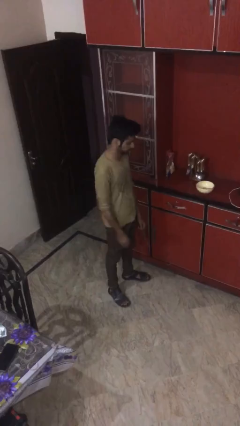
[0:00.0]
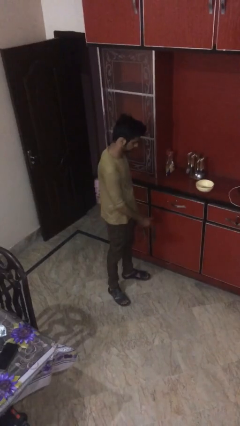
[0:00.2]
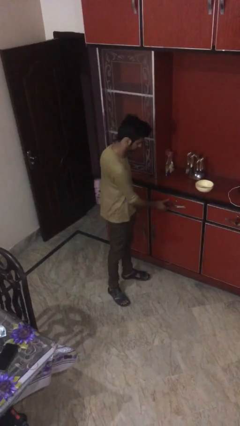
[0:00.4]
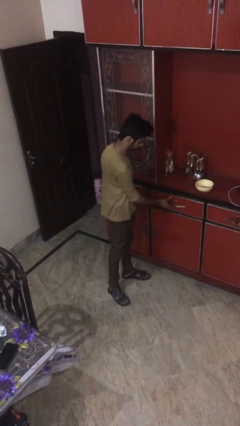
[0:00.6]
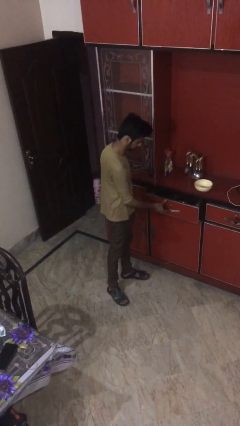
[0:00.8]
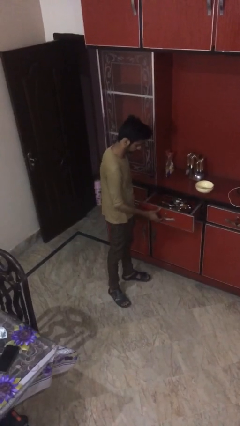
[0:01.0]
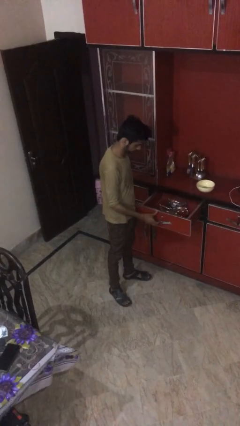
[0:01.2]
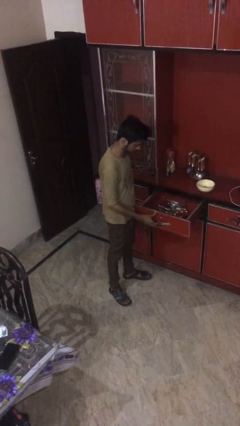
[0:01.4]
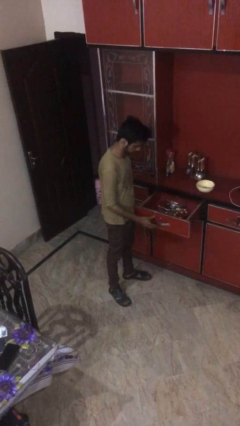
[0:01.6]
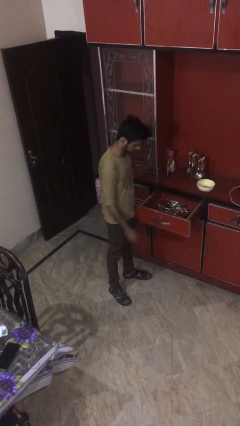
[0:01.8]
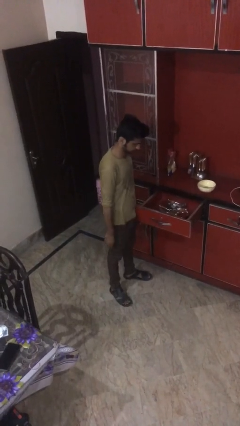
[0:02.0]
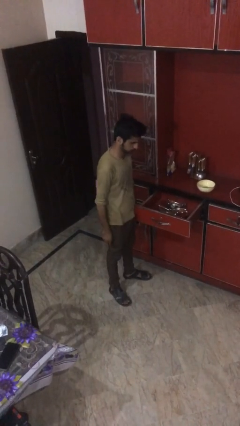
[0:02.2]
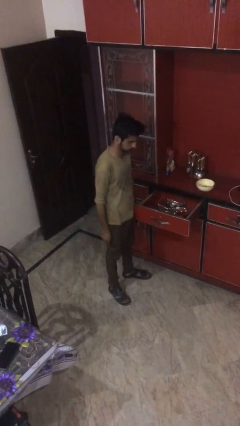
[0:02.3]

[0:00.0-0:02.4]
person opens kitchen drawer

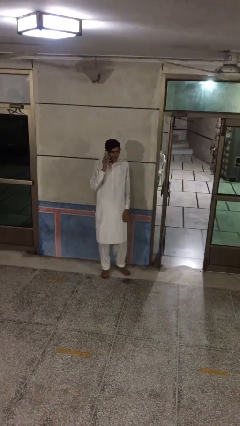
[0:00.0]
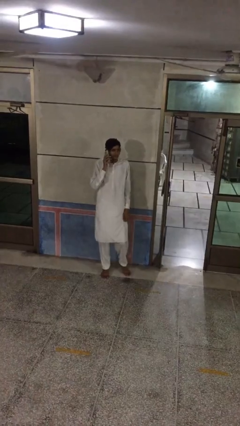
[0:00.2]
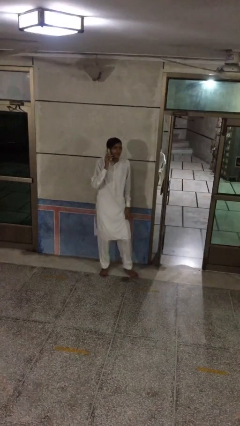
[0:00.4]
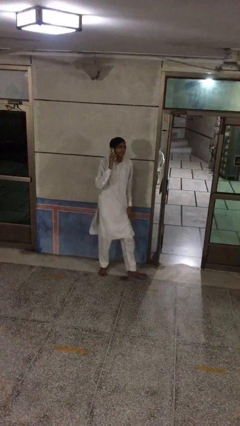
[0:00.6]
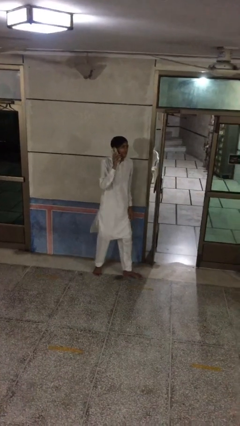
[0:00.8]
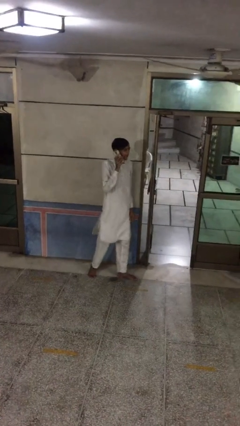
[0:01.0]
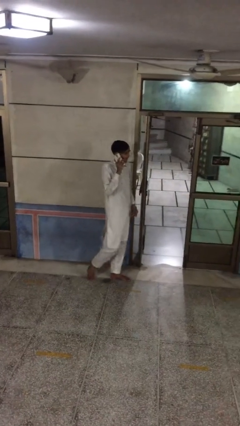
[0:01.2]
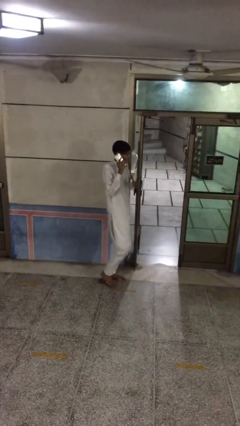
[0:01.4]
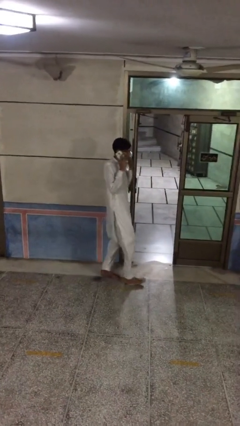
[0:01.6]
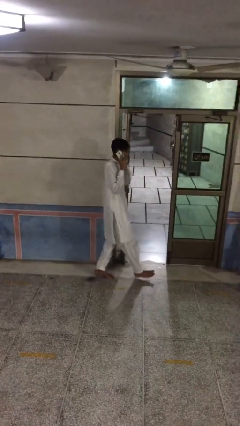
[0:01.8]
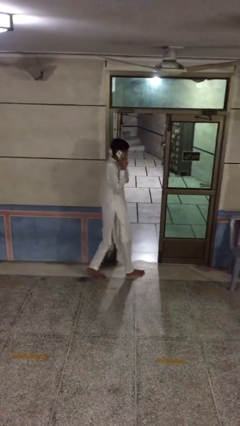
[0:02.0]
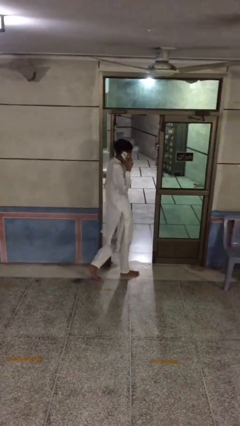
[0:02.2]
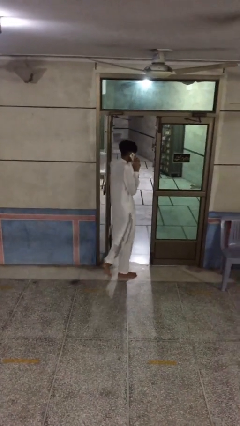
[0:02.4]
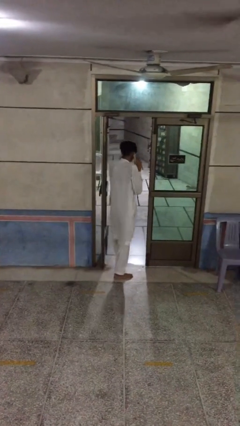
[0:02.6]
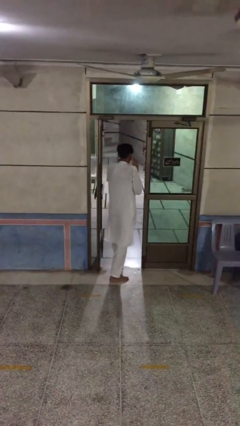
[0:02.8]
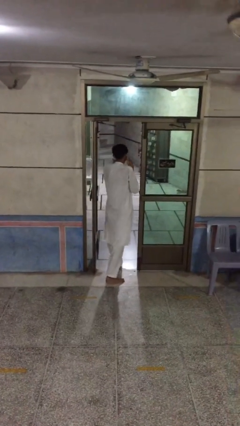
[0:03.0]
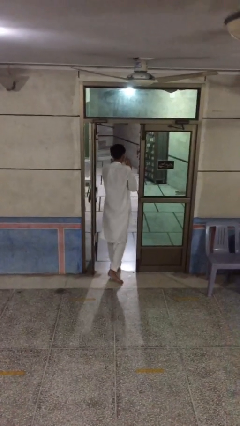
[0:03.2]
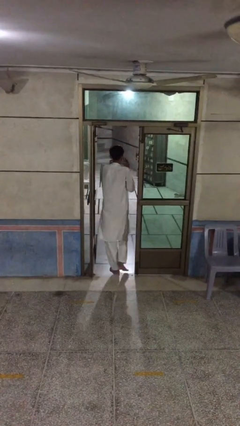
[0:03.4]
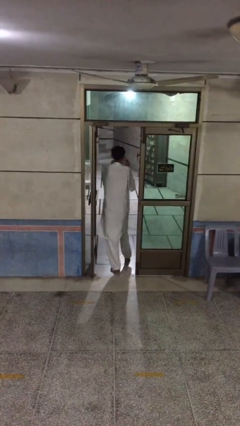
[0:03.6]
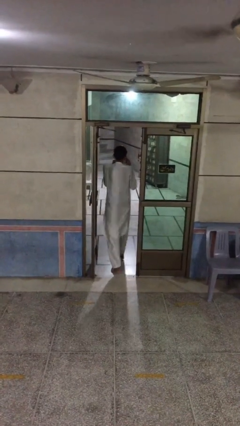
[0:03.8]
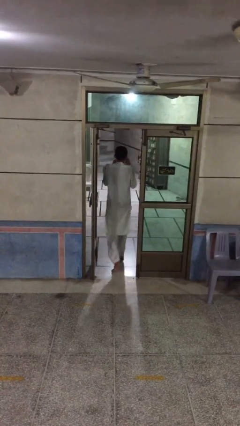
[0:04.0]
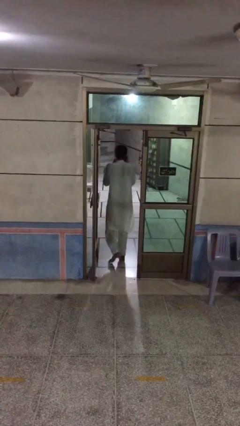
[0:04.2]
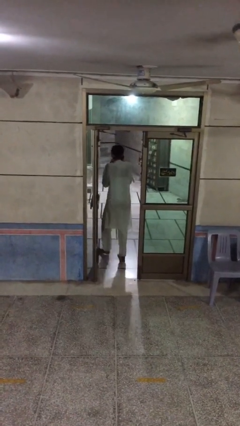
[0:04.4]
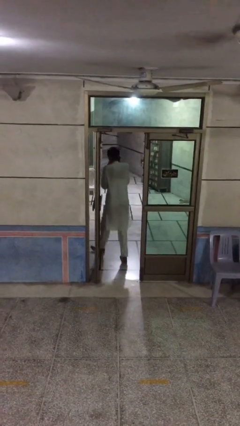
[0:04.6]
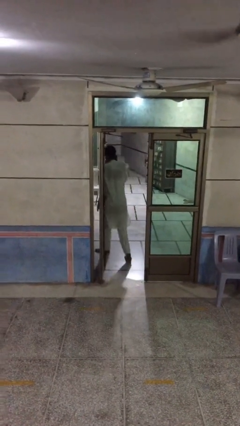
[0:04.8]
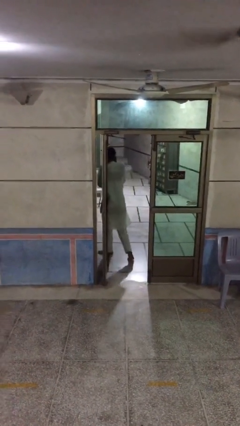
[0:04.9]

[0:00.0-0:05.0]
person exits scene through structure

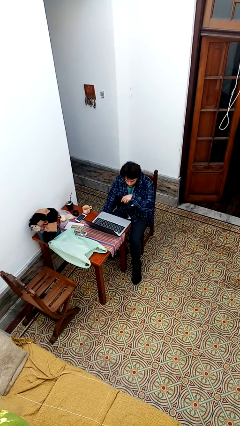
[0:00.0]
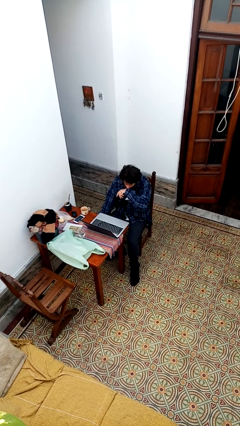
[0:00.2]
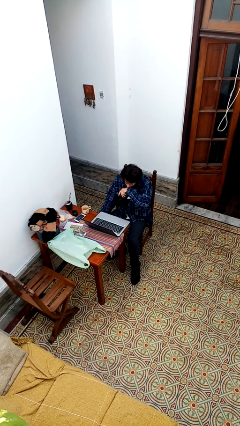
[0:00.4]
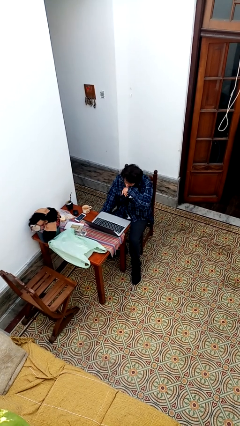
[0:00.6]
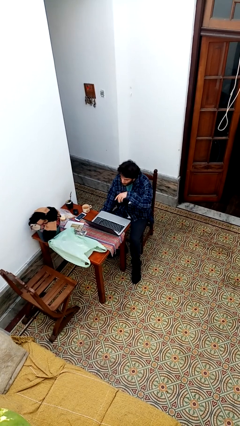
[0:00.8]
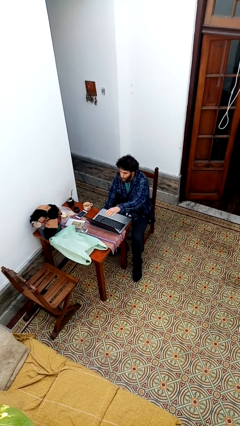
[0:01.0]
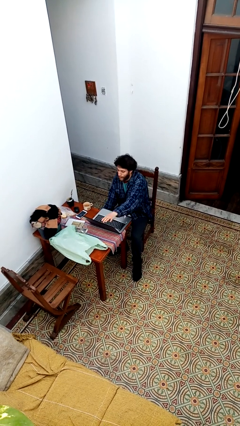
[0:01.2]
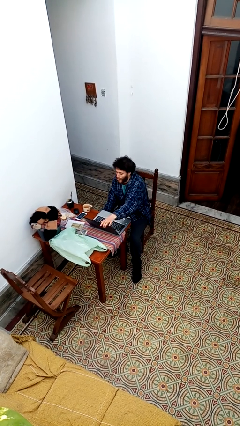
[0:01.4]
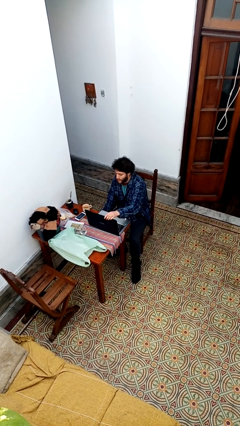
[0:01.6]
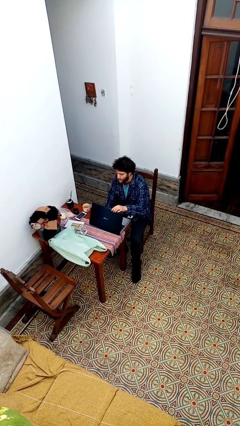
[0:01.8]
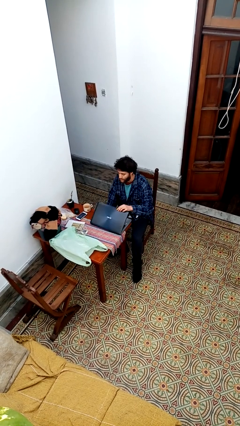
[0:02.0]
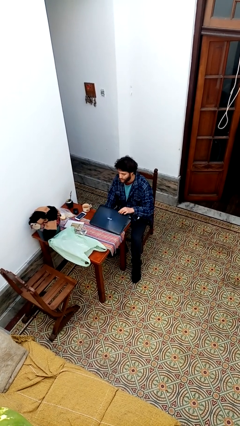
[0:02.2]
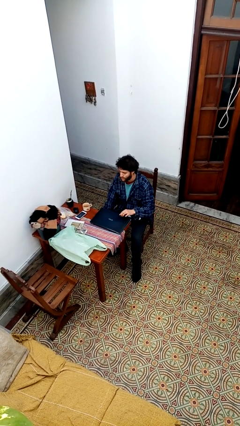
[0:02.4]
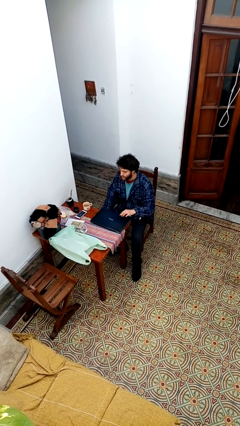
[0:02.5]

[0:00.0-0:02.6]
person closes laptop

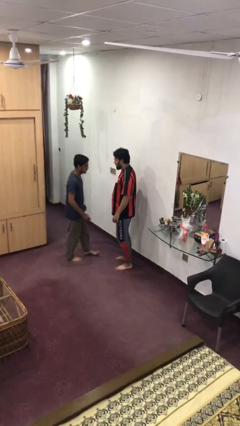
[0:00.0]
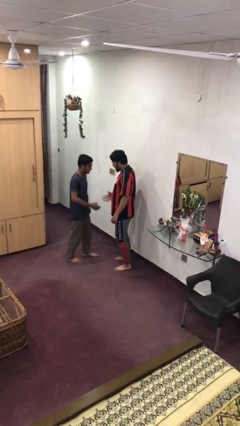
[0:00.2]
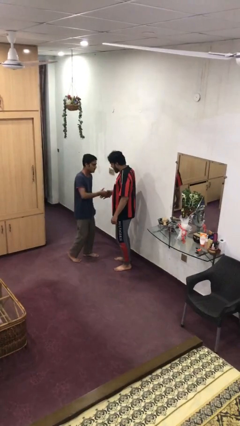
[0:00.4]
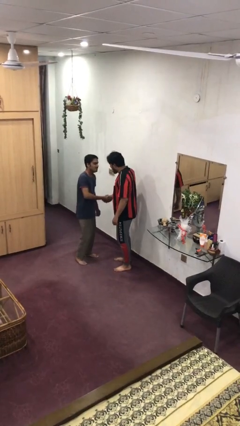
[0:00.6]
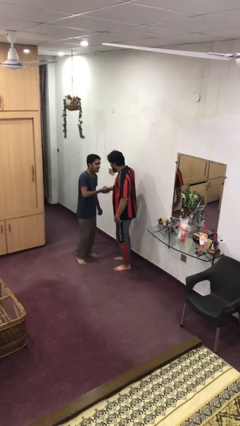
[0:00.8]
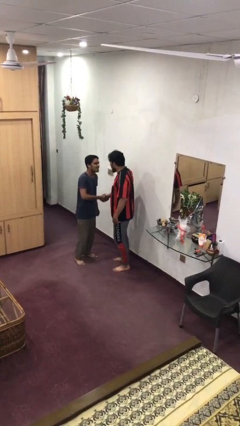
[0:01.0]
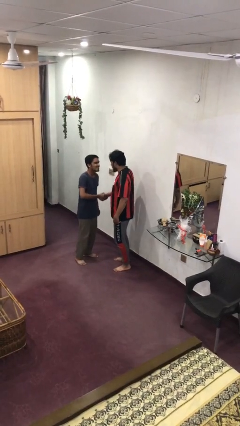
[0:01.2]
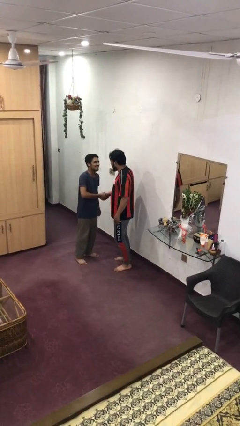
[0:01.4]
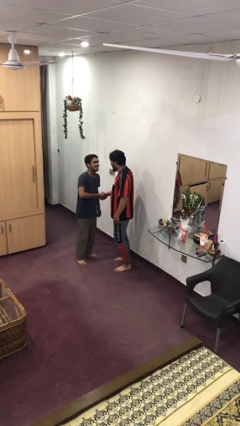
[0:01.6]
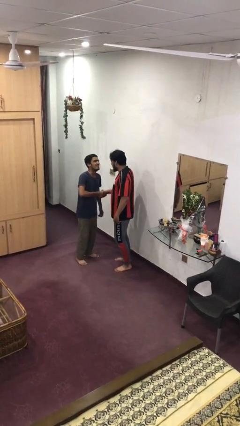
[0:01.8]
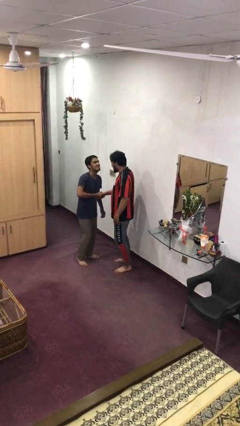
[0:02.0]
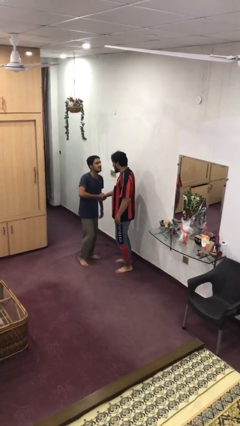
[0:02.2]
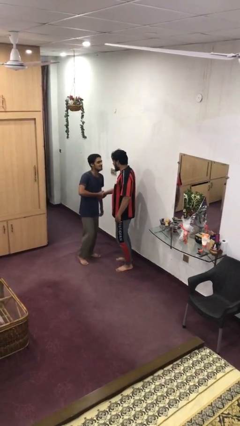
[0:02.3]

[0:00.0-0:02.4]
person shakes hand

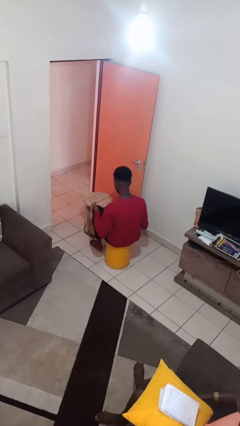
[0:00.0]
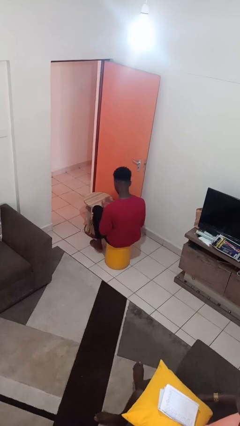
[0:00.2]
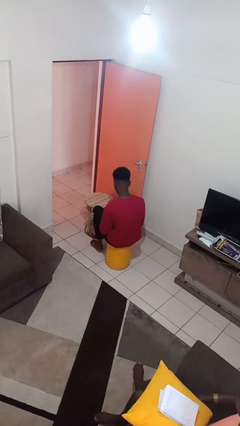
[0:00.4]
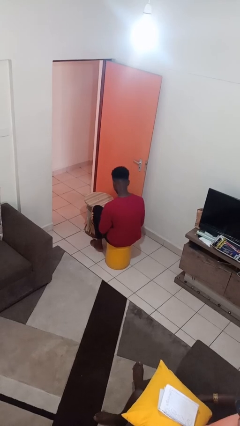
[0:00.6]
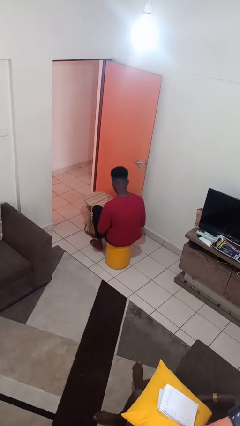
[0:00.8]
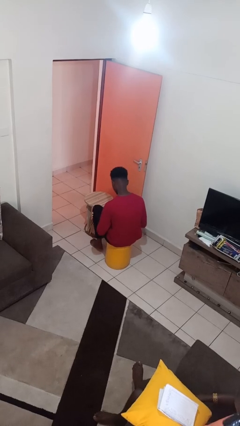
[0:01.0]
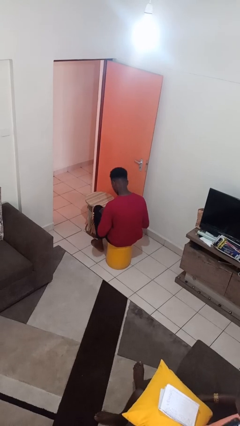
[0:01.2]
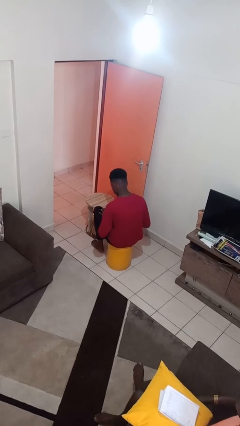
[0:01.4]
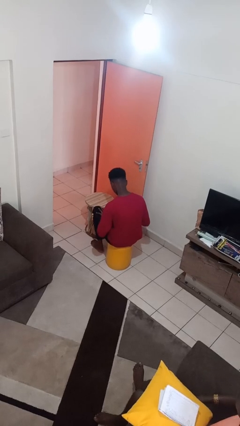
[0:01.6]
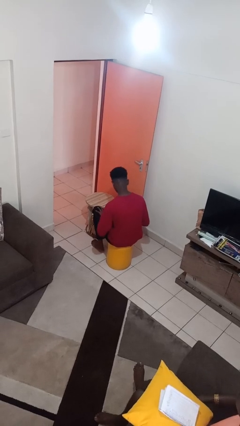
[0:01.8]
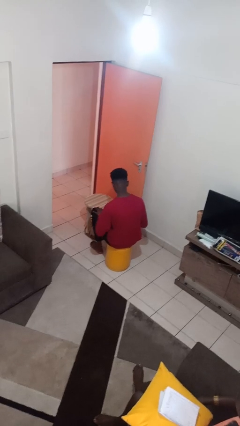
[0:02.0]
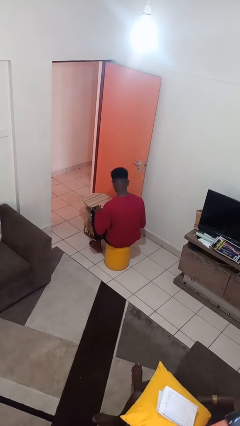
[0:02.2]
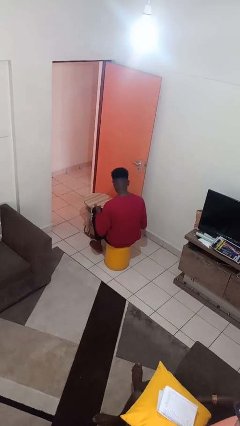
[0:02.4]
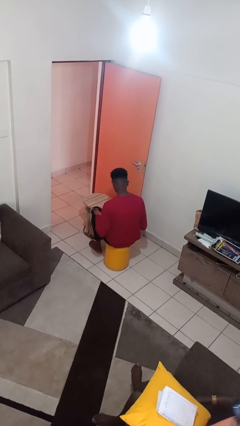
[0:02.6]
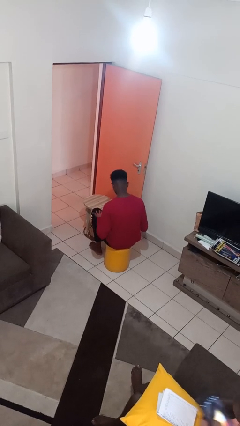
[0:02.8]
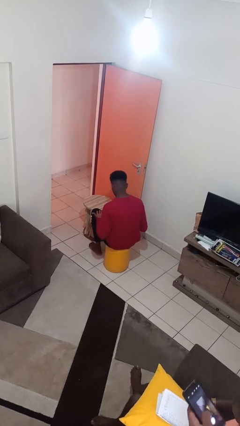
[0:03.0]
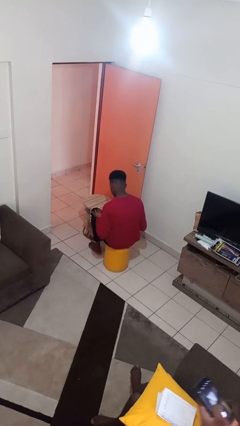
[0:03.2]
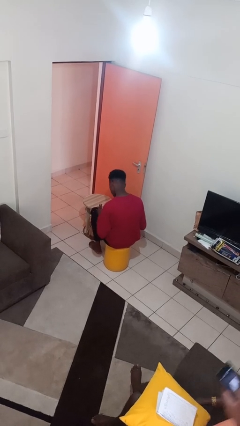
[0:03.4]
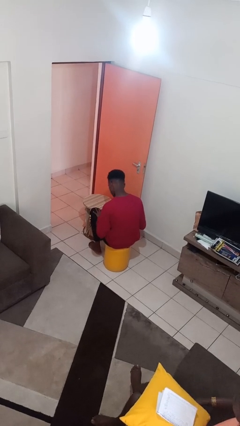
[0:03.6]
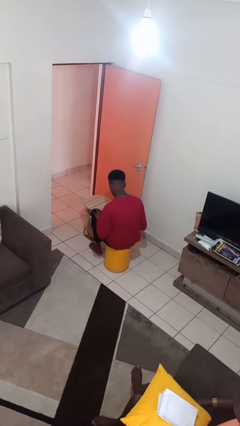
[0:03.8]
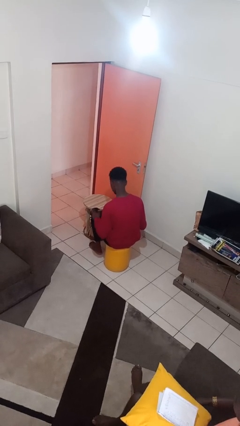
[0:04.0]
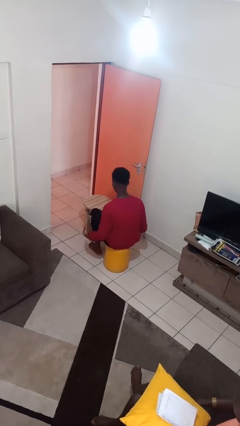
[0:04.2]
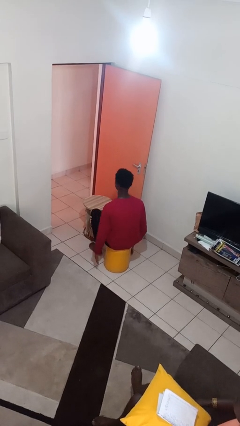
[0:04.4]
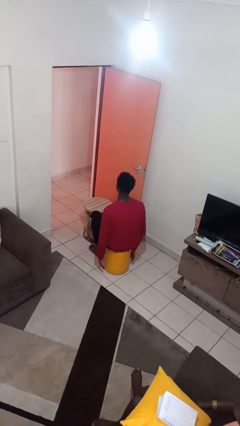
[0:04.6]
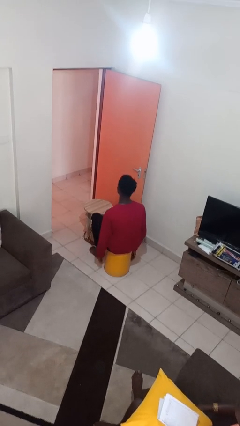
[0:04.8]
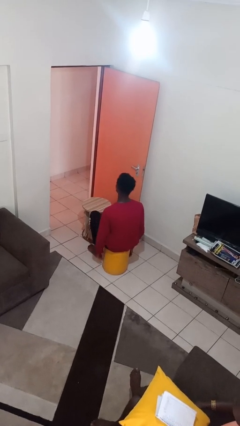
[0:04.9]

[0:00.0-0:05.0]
person looks at hands in lap

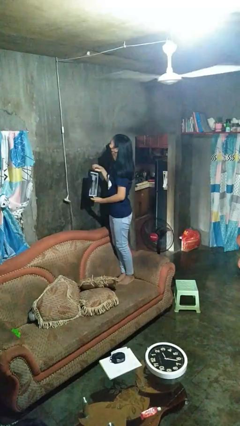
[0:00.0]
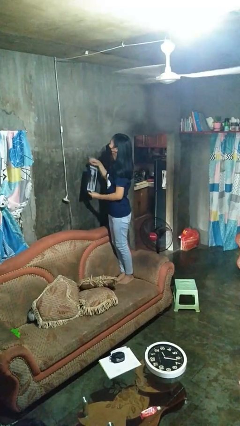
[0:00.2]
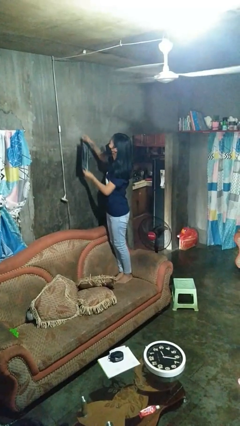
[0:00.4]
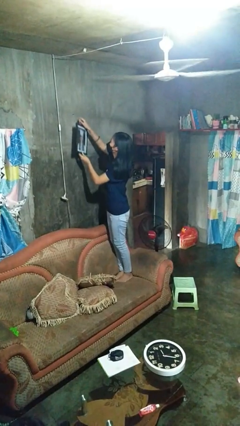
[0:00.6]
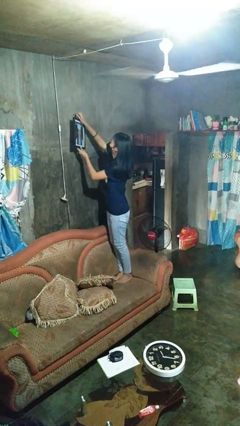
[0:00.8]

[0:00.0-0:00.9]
person puts up picture frame
